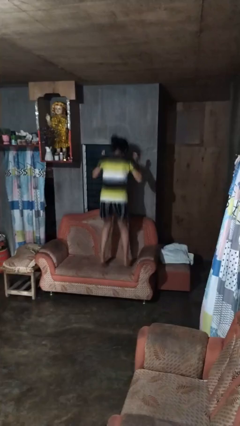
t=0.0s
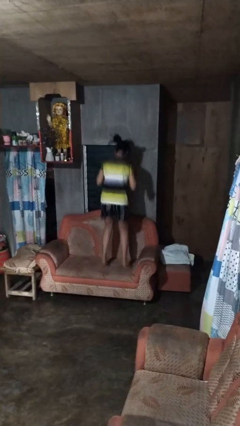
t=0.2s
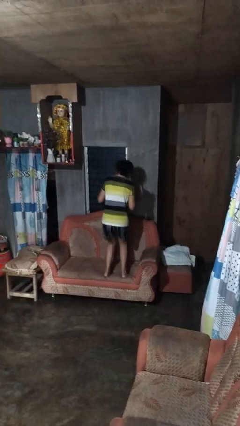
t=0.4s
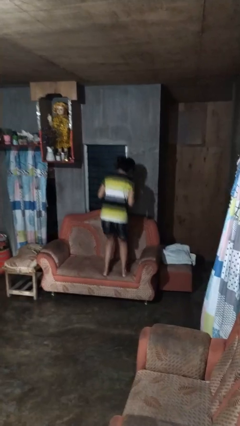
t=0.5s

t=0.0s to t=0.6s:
person jumps on couch

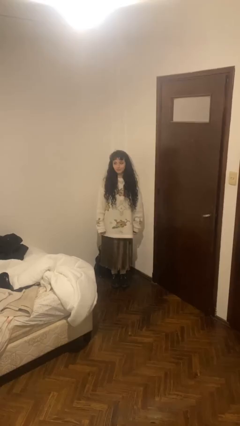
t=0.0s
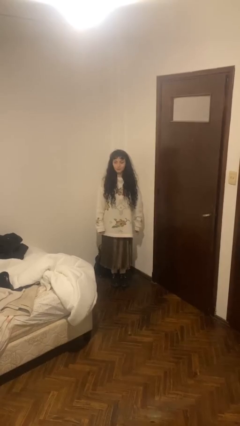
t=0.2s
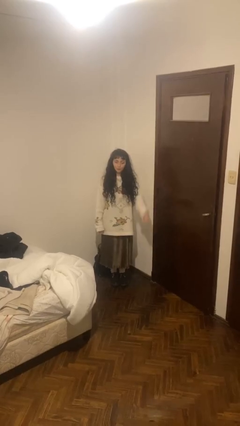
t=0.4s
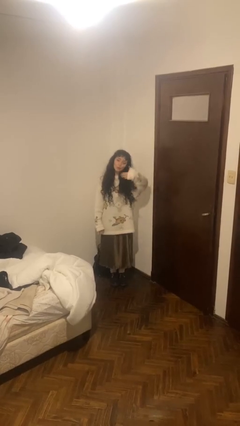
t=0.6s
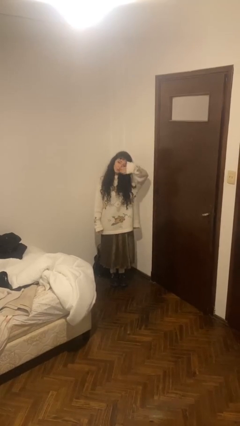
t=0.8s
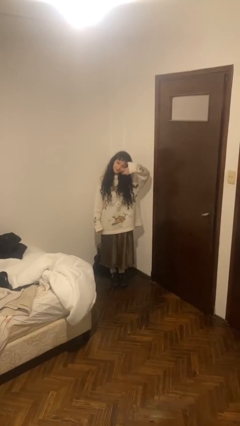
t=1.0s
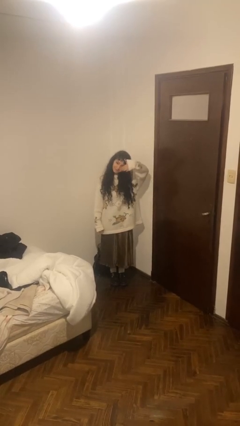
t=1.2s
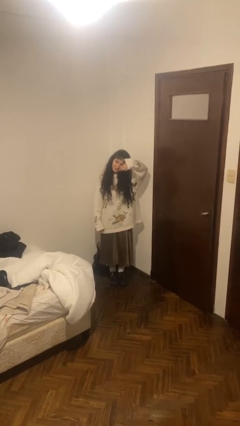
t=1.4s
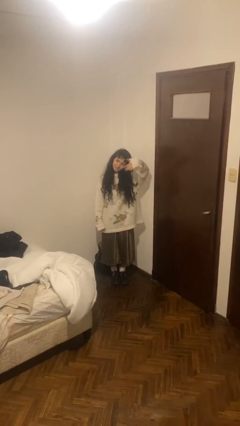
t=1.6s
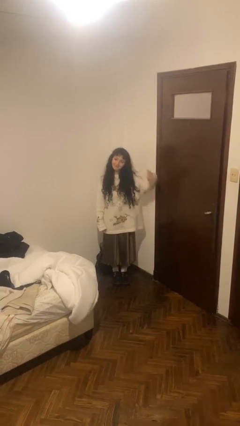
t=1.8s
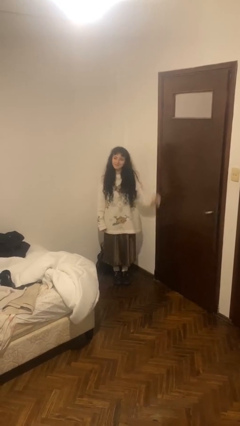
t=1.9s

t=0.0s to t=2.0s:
person gestures come here

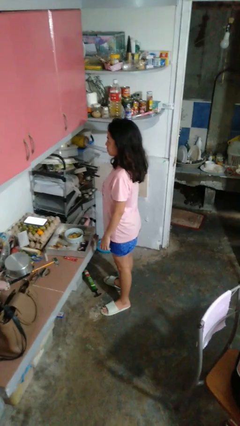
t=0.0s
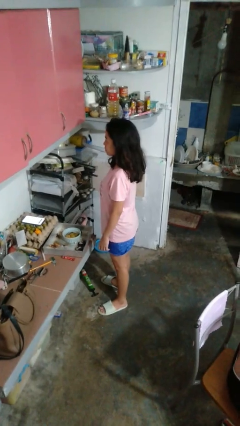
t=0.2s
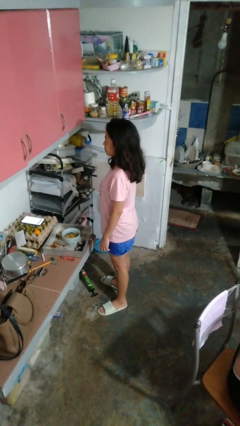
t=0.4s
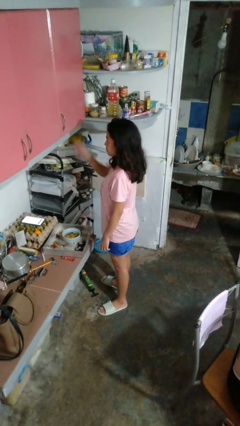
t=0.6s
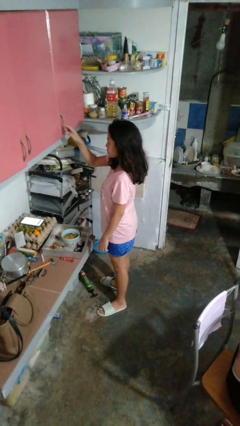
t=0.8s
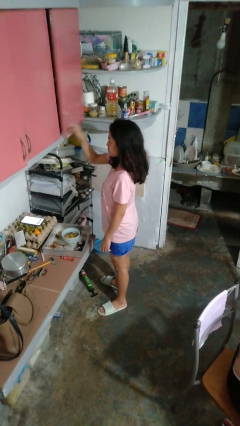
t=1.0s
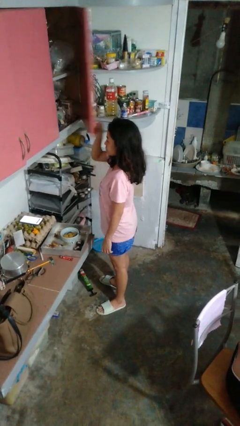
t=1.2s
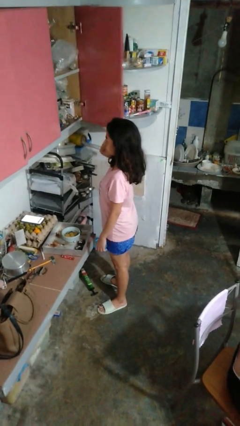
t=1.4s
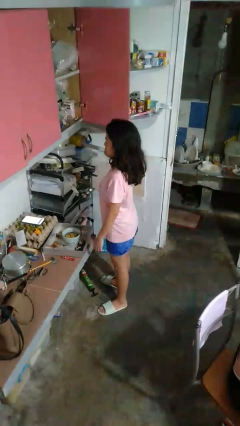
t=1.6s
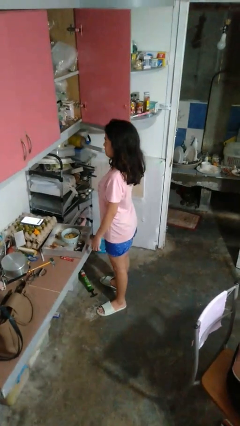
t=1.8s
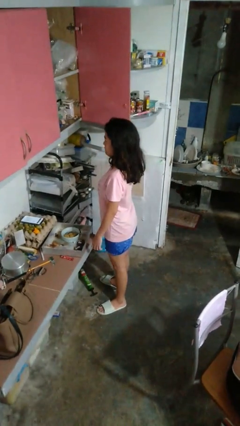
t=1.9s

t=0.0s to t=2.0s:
person opens cabinet

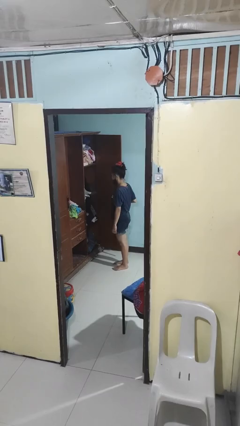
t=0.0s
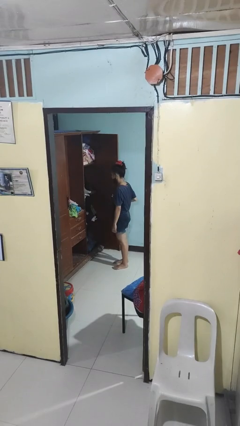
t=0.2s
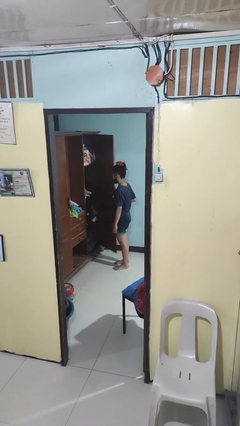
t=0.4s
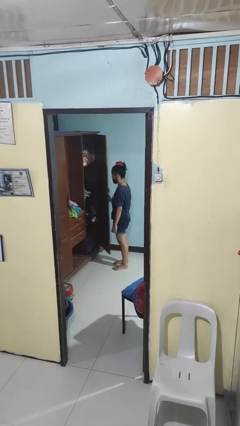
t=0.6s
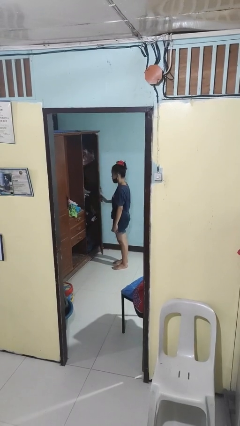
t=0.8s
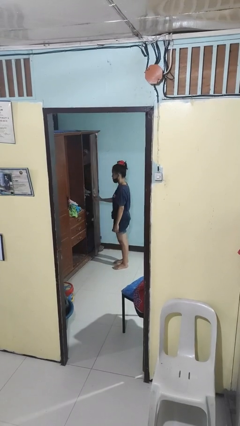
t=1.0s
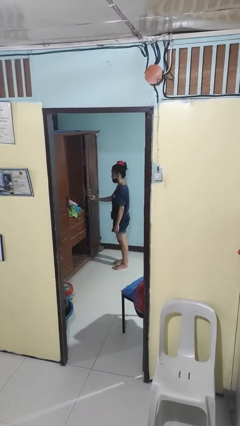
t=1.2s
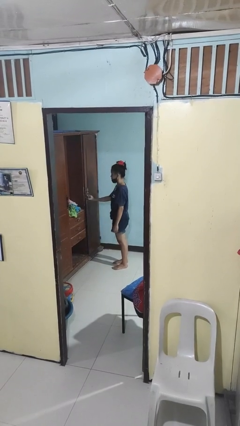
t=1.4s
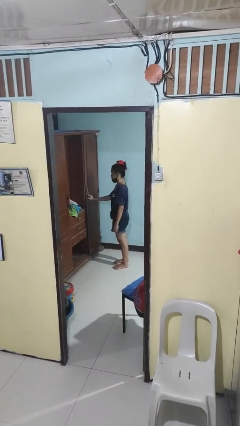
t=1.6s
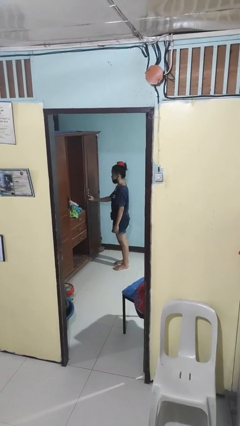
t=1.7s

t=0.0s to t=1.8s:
person closes closet door

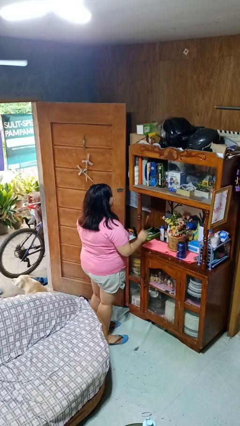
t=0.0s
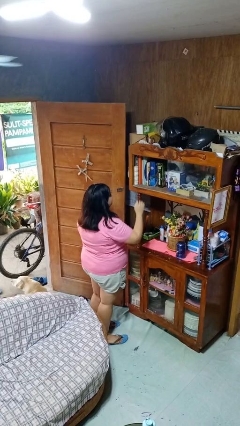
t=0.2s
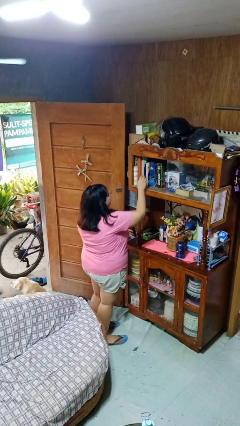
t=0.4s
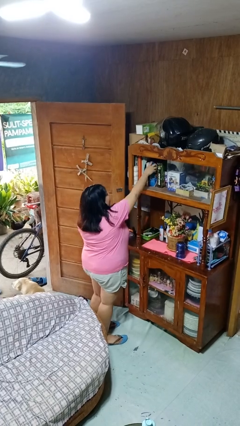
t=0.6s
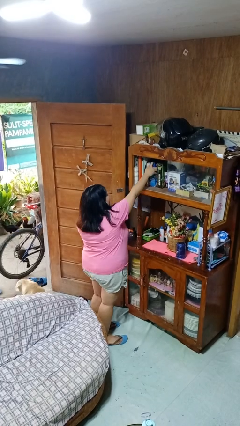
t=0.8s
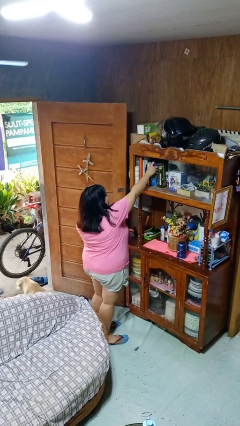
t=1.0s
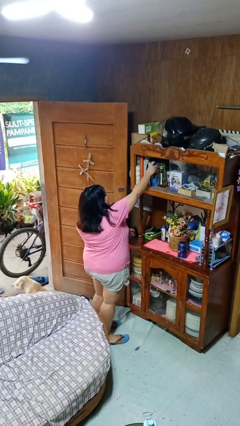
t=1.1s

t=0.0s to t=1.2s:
person picks up object from shelf

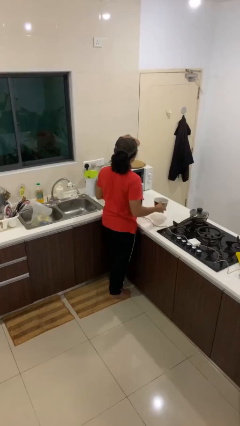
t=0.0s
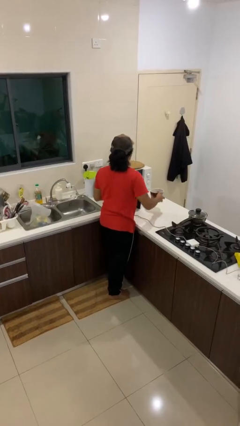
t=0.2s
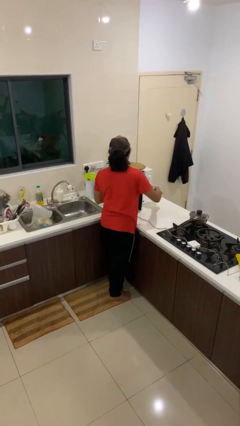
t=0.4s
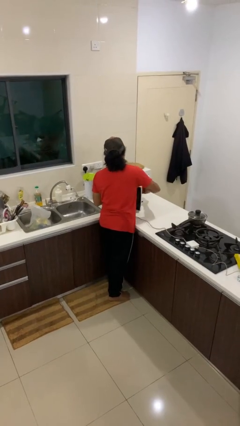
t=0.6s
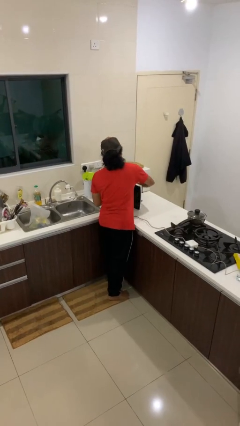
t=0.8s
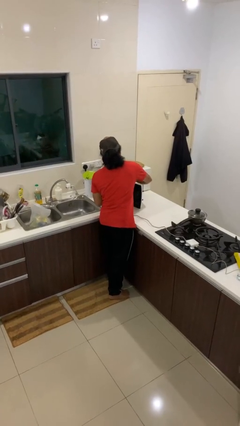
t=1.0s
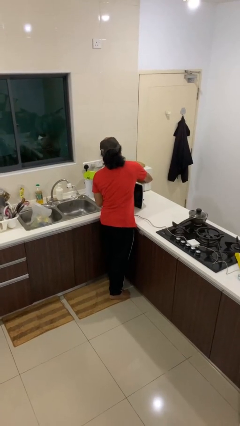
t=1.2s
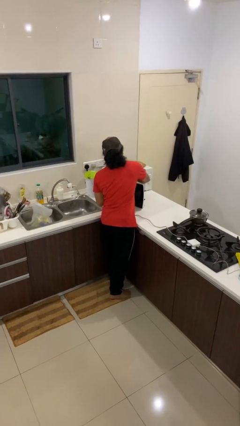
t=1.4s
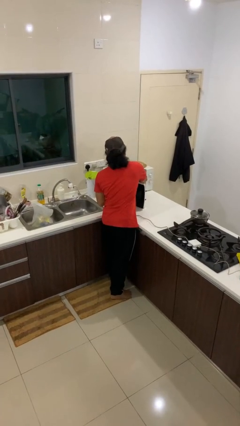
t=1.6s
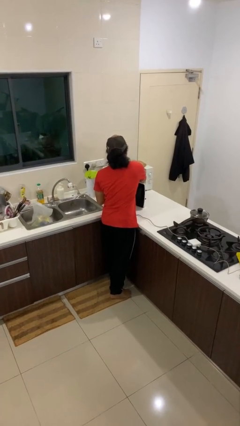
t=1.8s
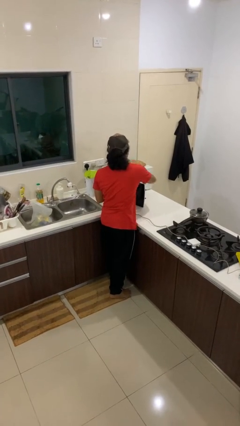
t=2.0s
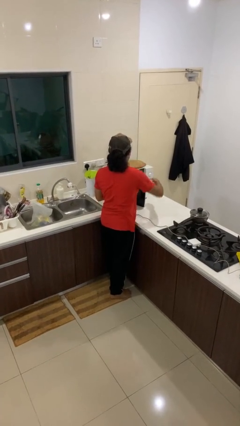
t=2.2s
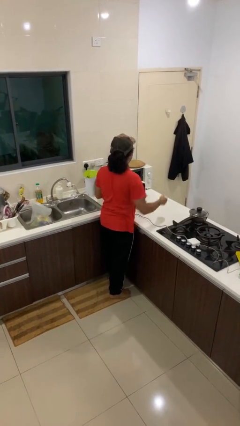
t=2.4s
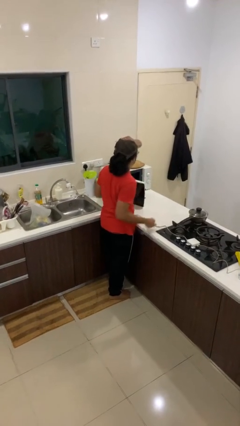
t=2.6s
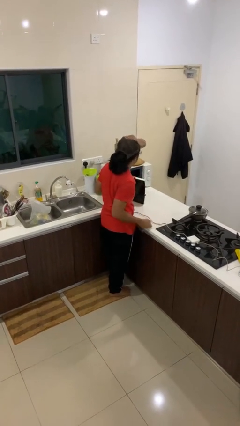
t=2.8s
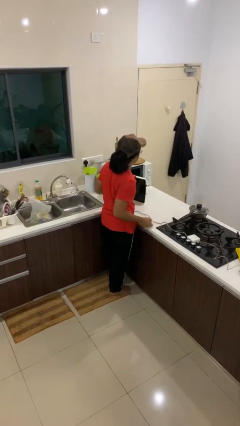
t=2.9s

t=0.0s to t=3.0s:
person puts object into microwave

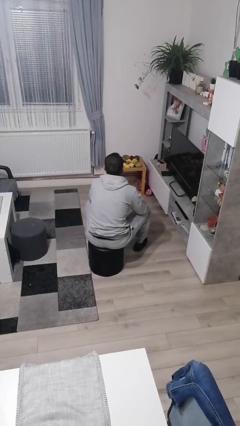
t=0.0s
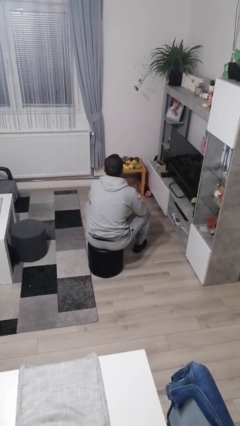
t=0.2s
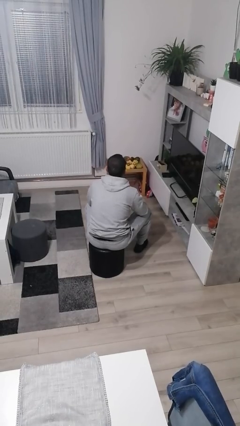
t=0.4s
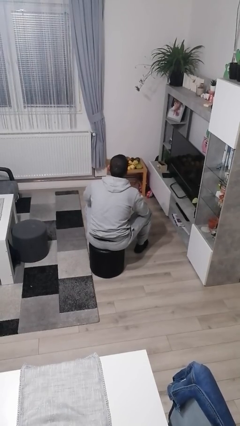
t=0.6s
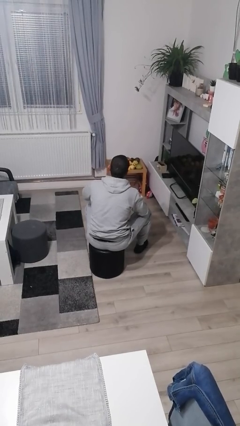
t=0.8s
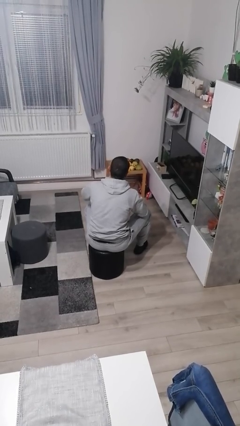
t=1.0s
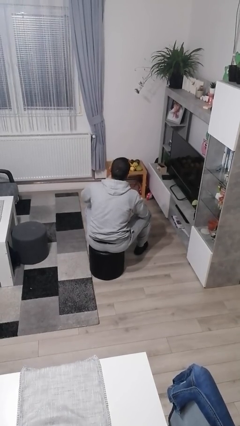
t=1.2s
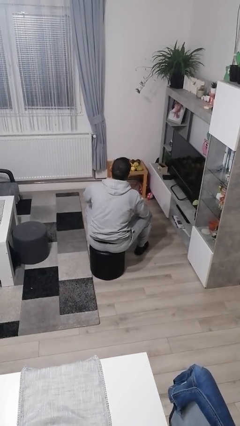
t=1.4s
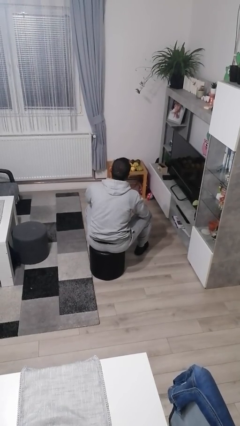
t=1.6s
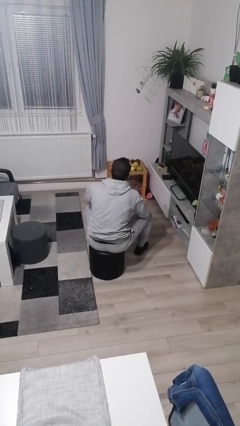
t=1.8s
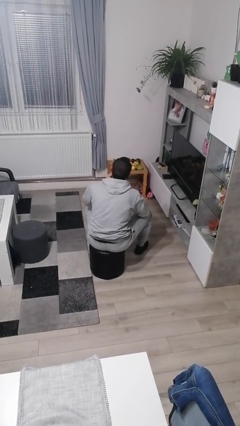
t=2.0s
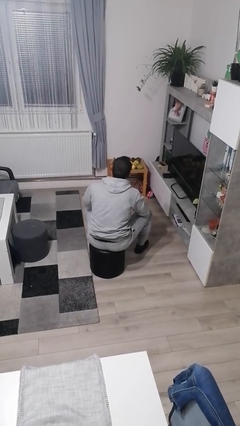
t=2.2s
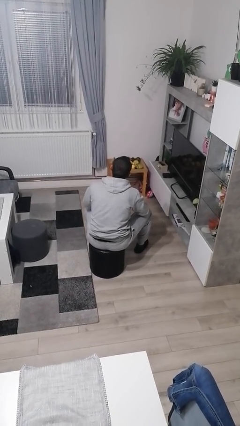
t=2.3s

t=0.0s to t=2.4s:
person strokes chin

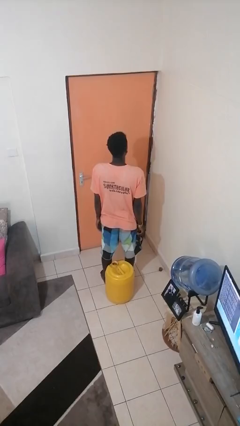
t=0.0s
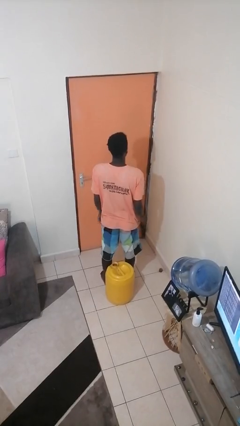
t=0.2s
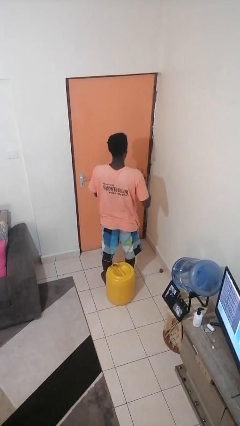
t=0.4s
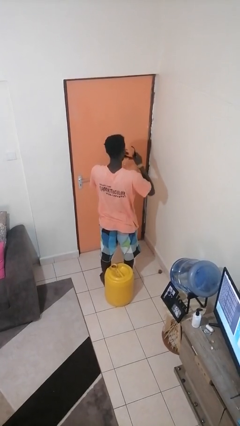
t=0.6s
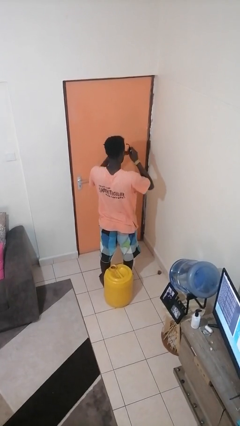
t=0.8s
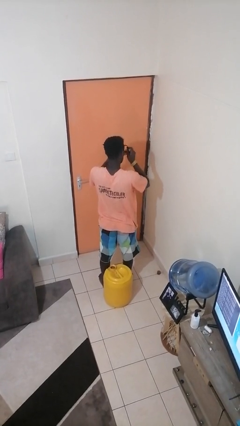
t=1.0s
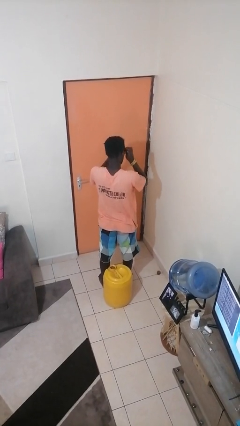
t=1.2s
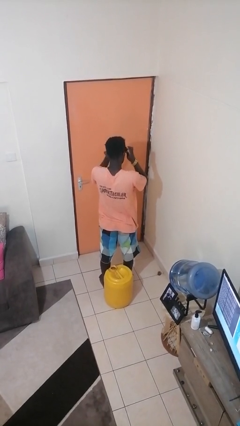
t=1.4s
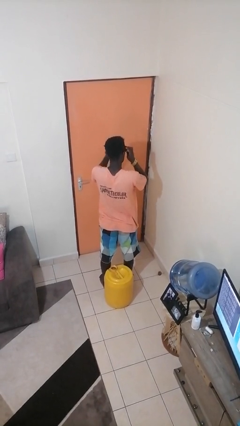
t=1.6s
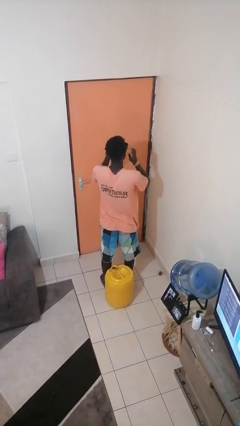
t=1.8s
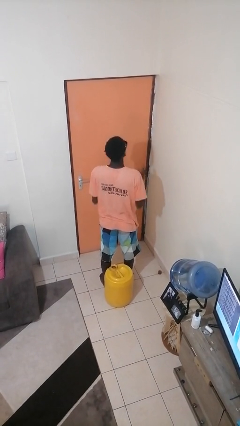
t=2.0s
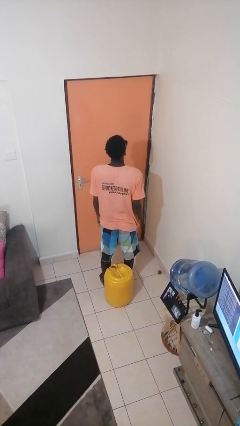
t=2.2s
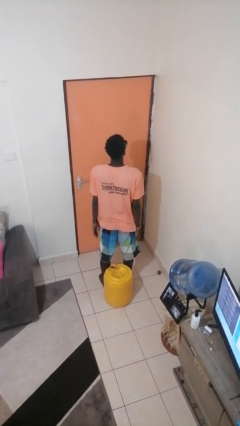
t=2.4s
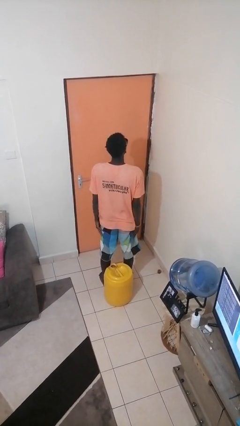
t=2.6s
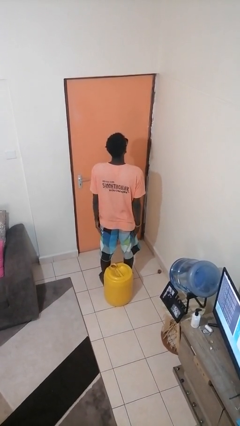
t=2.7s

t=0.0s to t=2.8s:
person puts on sunglasses

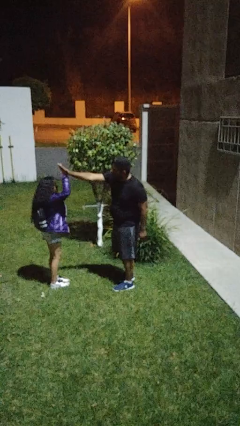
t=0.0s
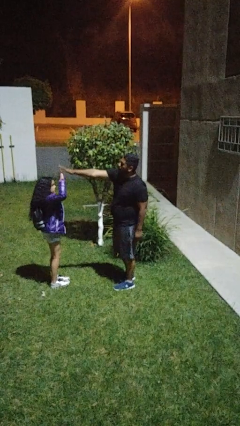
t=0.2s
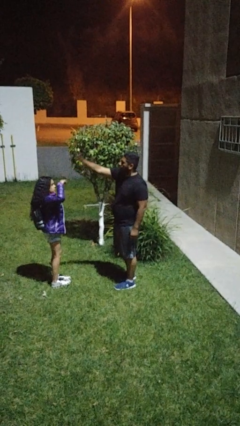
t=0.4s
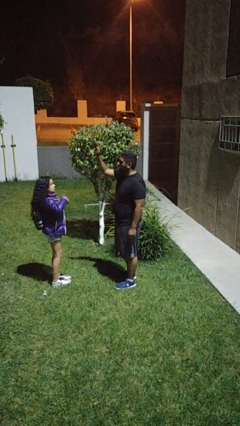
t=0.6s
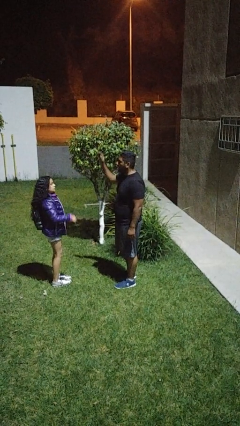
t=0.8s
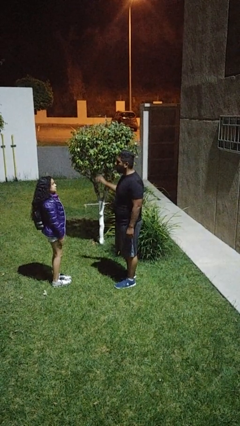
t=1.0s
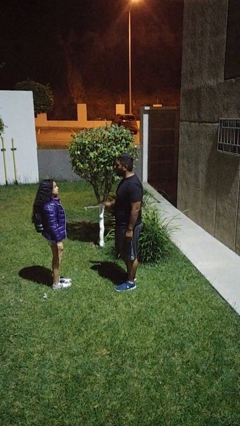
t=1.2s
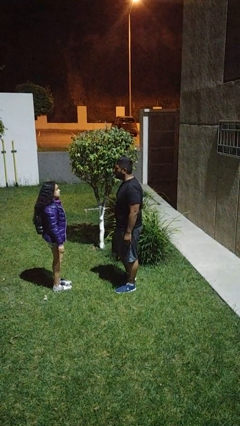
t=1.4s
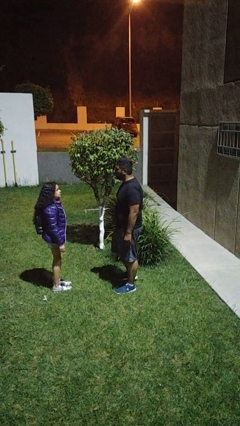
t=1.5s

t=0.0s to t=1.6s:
person highfives hand
